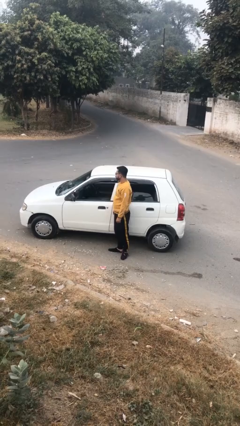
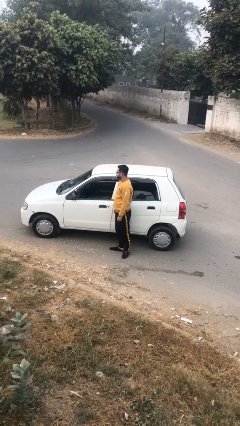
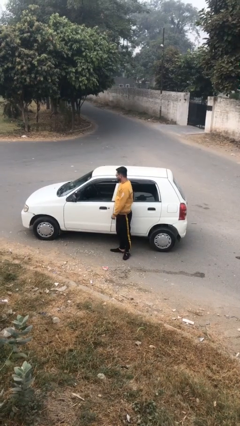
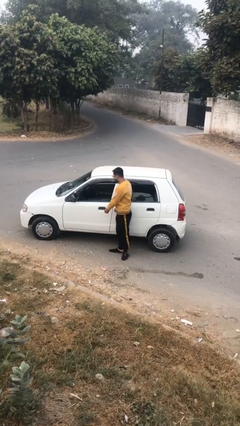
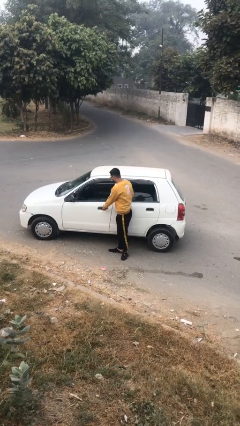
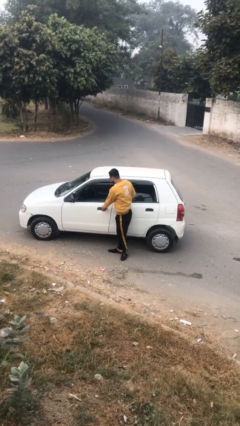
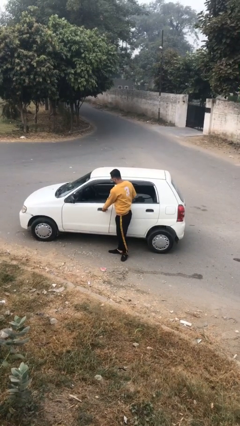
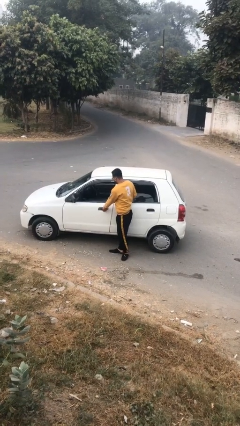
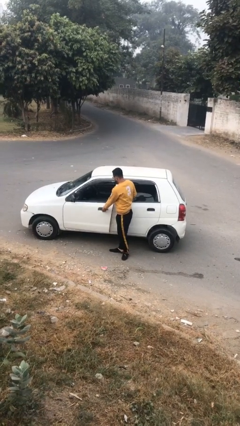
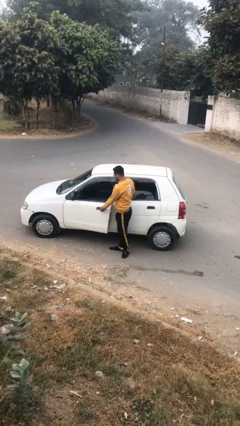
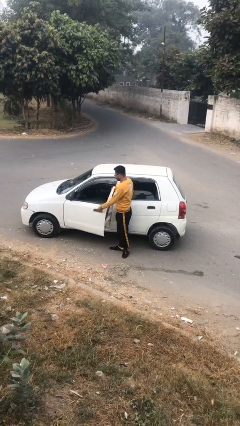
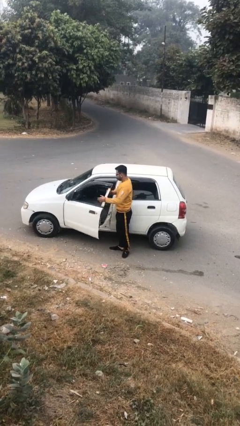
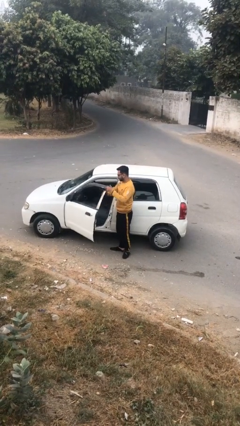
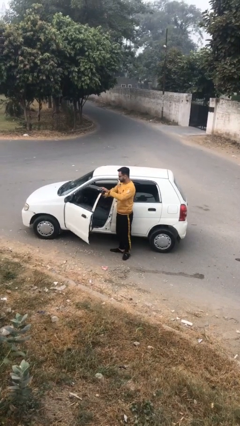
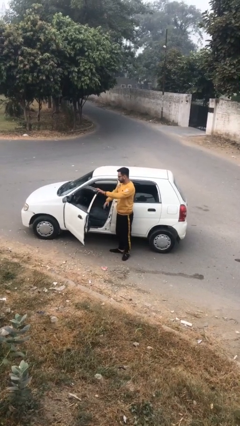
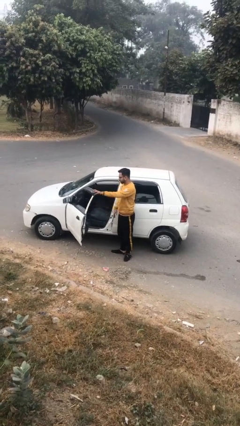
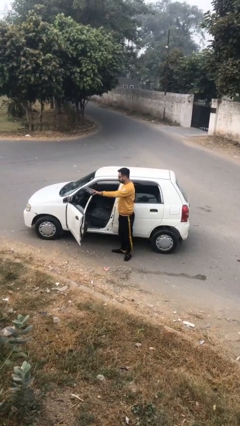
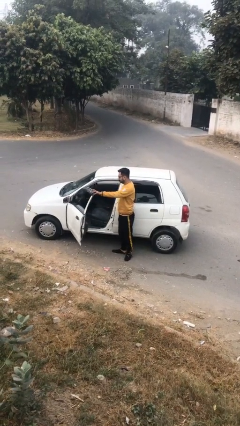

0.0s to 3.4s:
person opens car door

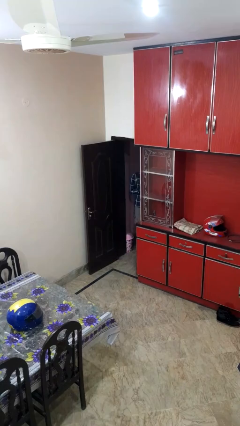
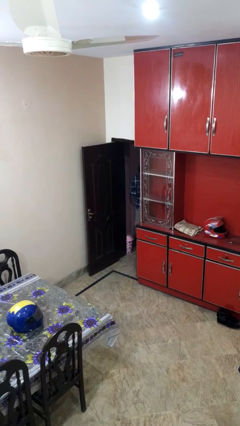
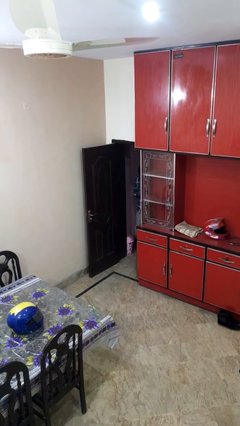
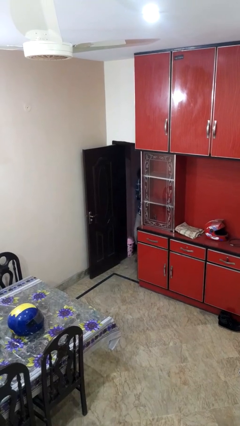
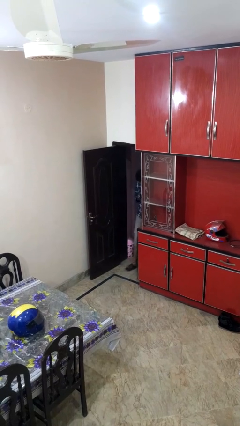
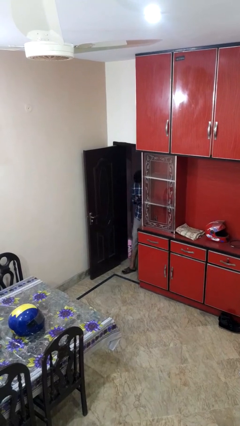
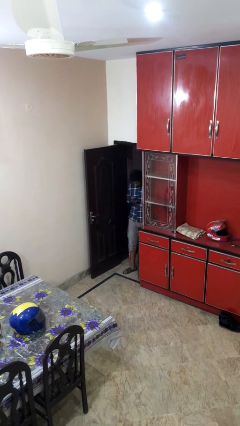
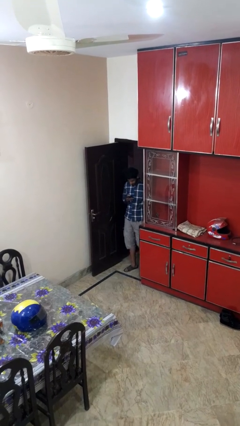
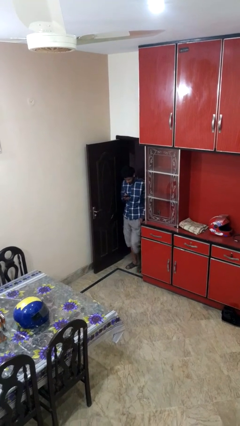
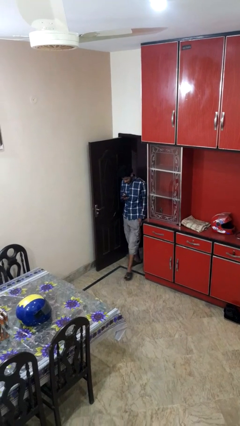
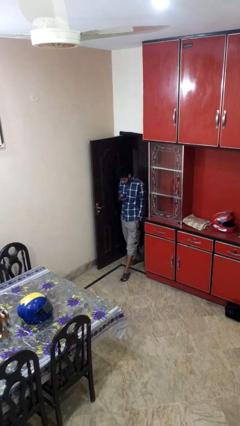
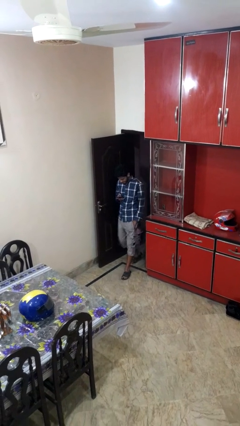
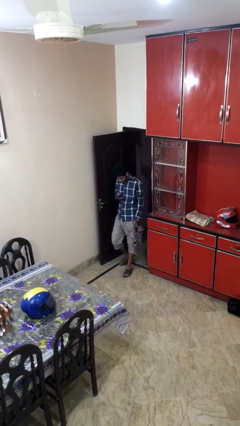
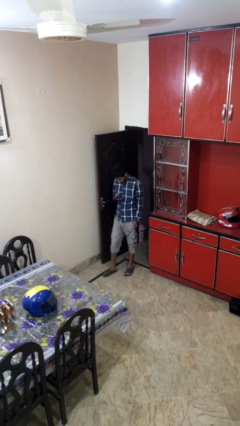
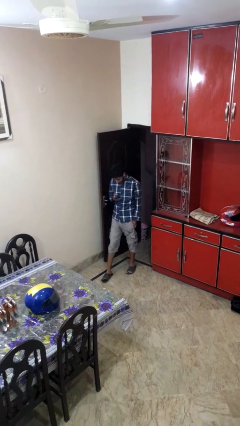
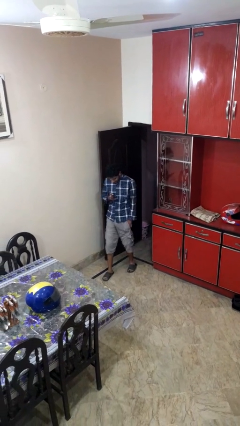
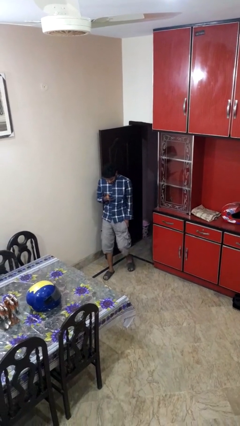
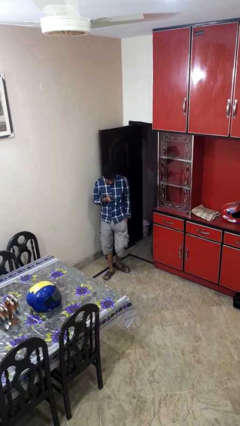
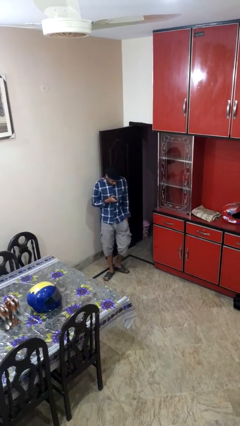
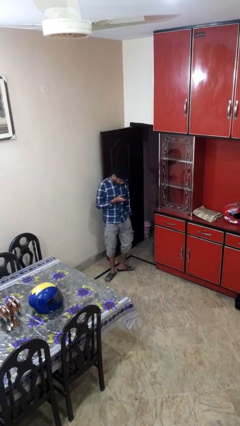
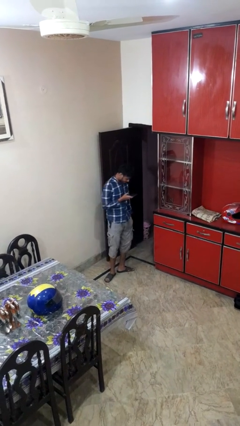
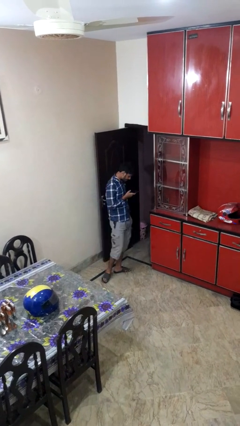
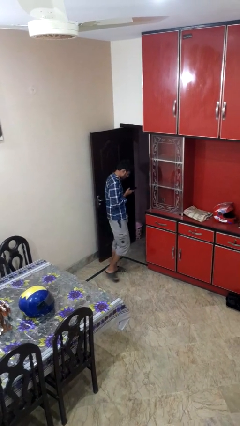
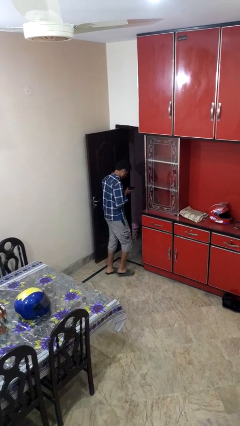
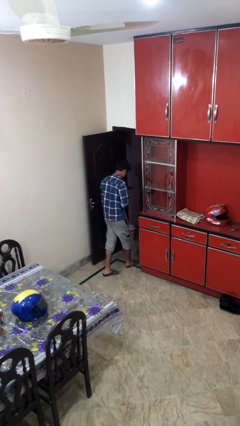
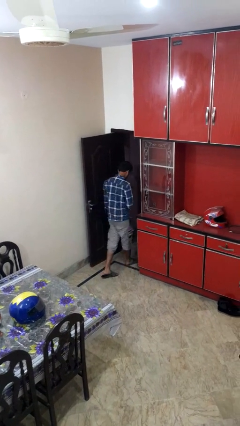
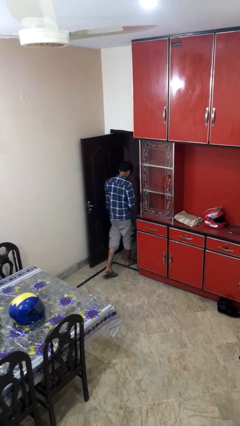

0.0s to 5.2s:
person enters scene through structure

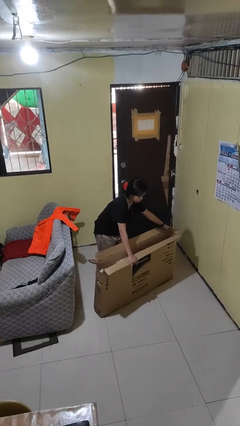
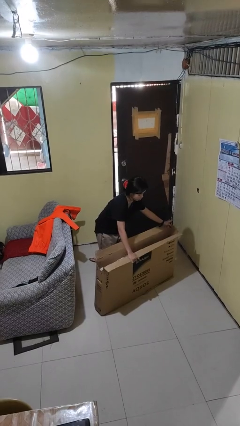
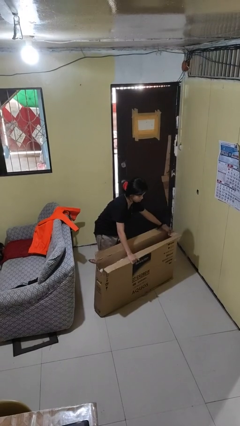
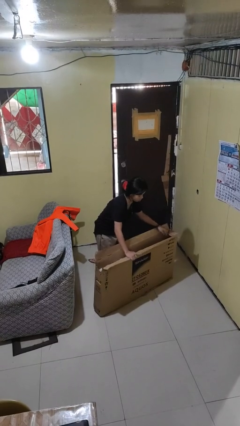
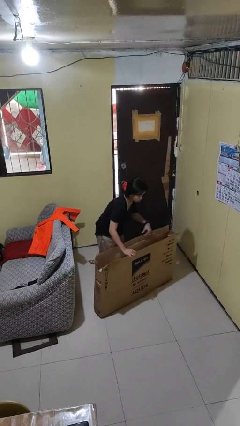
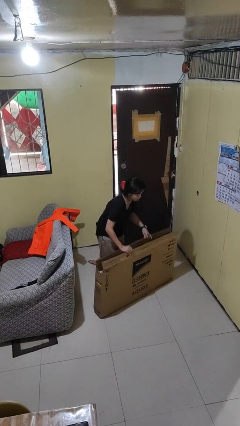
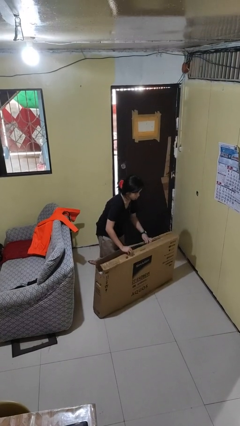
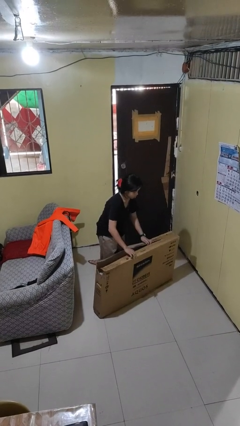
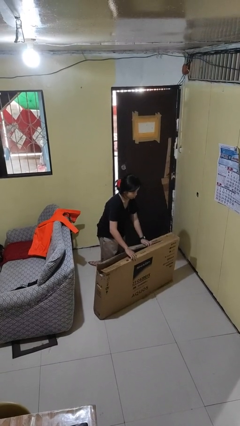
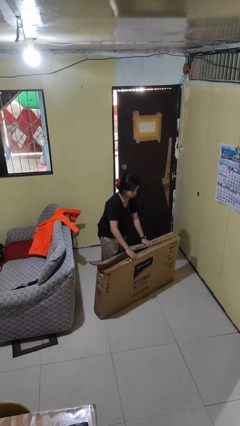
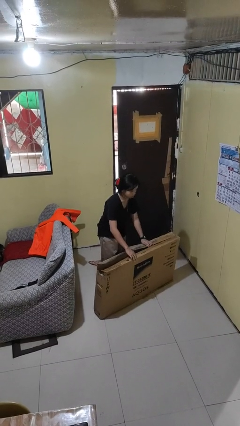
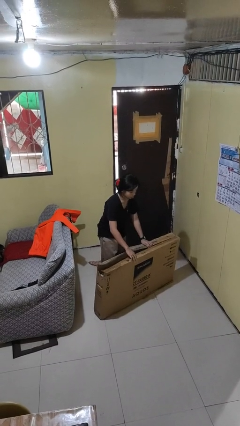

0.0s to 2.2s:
person closes box

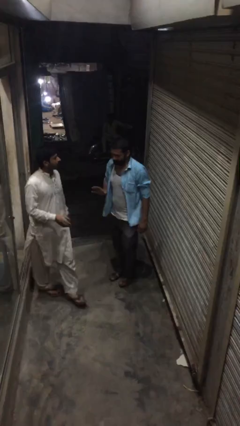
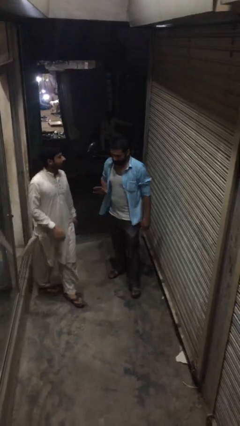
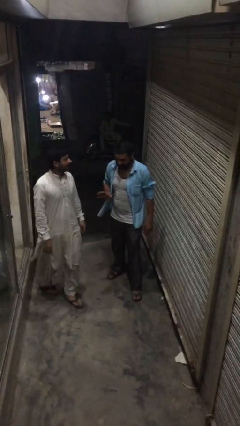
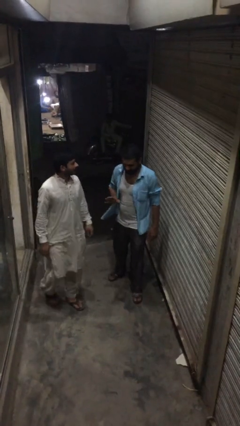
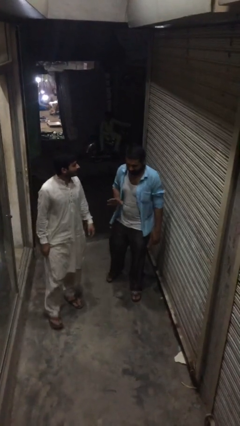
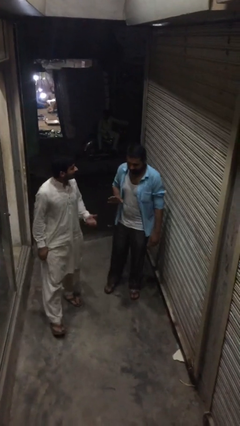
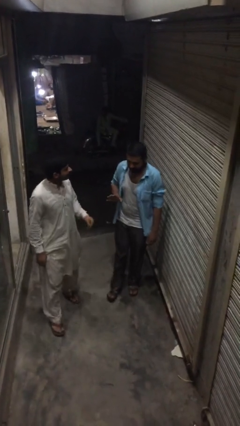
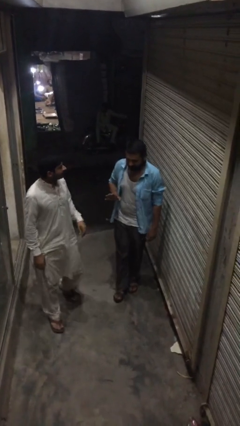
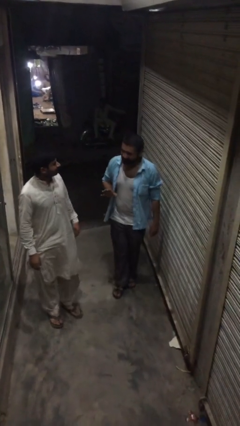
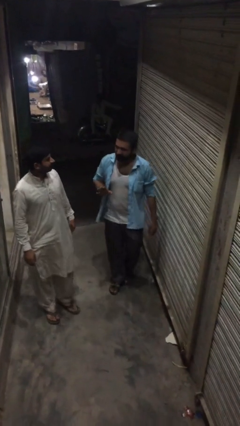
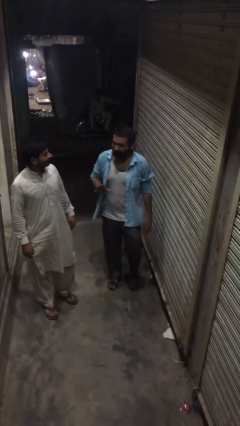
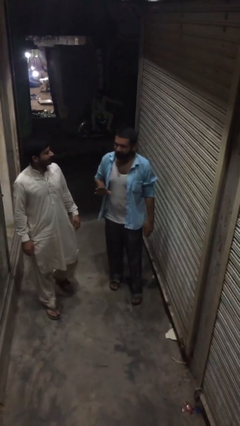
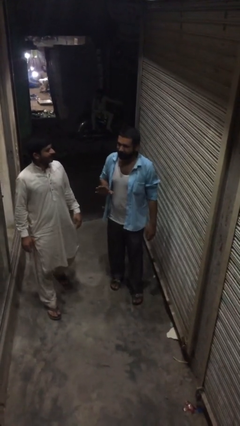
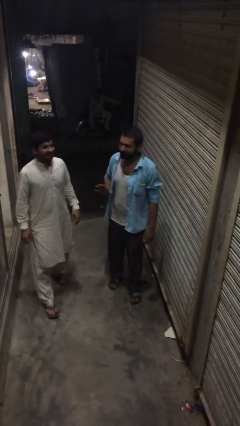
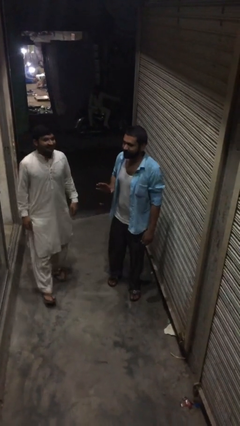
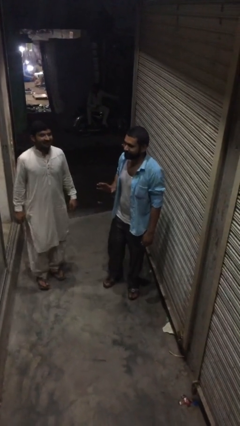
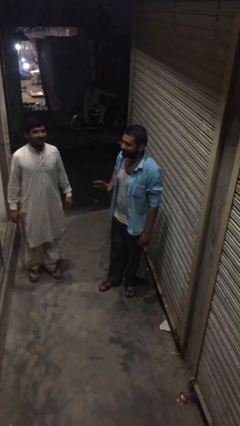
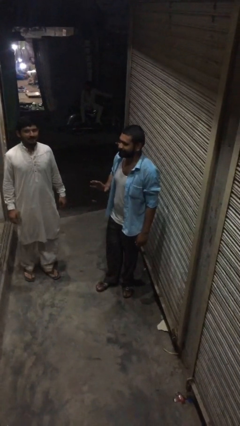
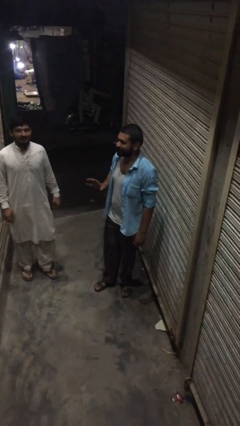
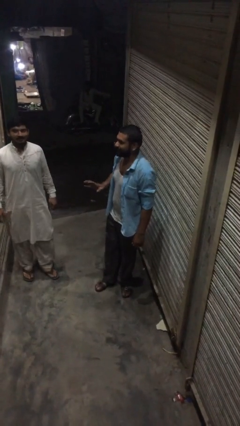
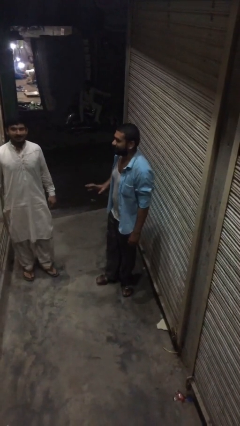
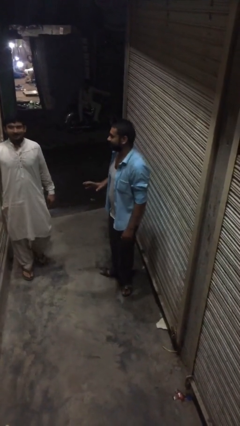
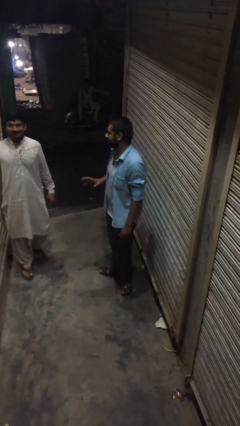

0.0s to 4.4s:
person talks to person

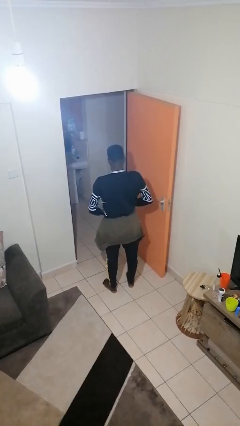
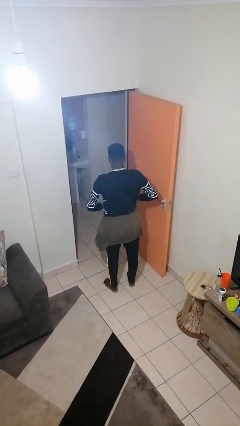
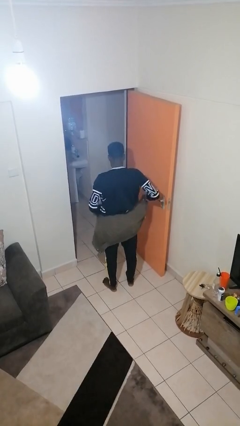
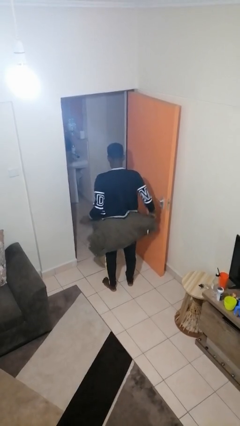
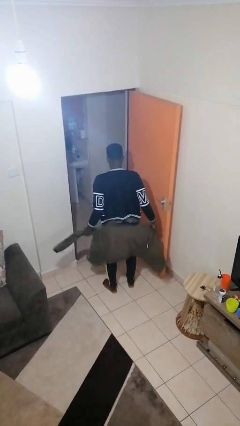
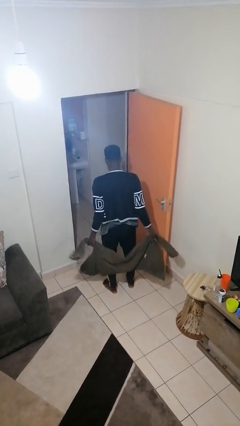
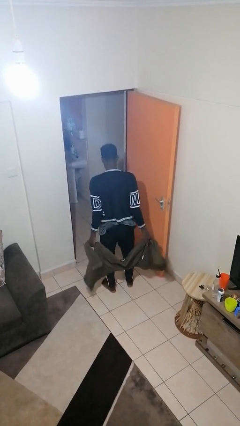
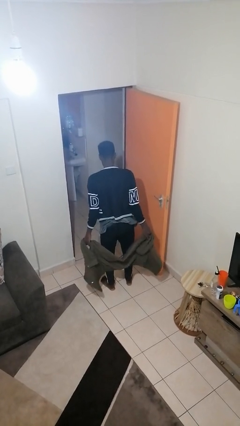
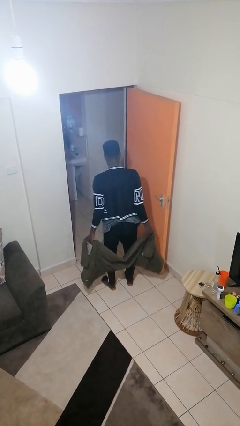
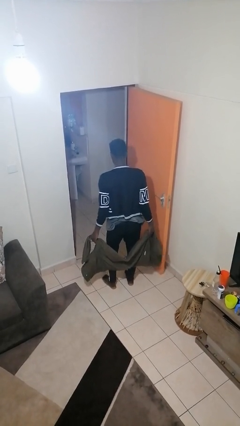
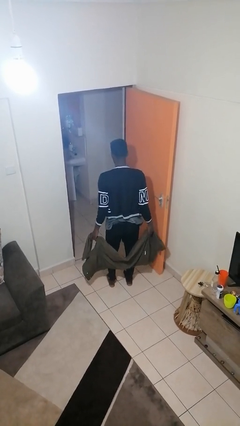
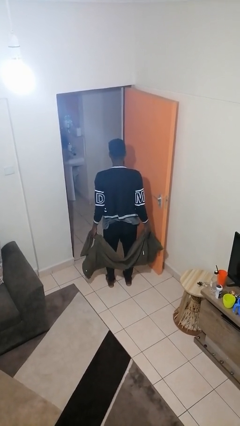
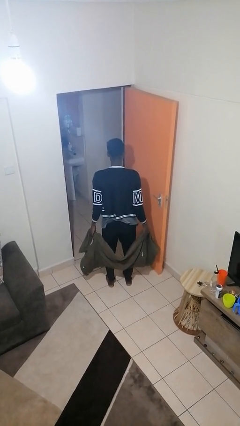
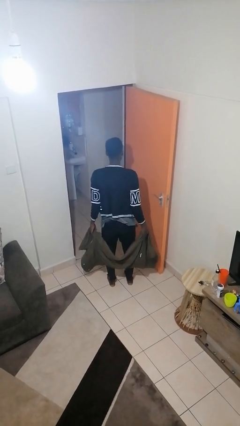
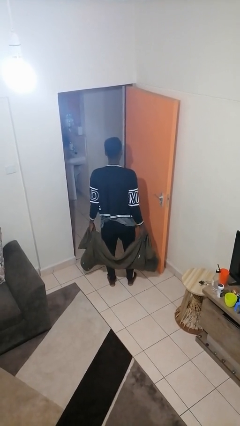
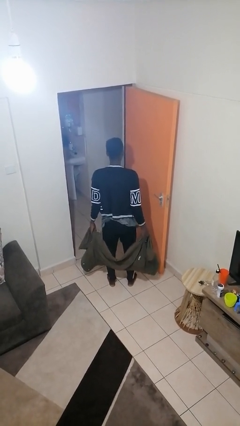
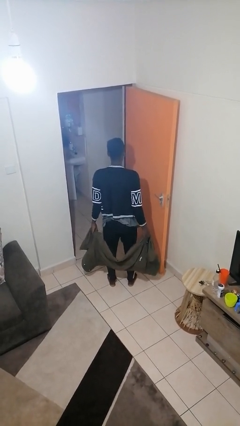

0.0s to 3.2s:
person unties jacket around waist
